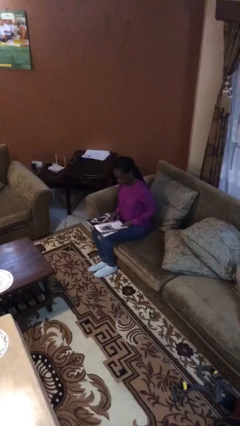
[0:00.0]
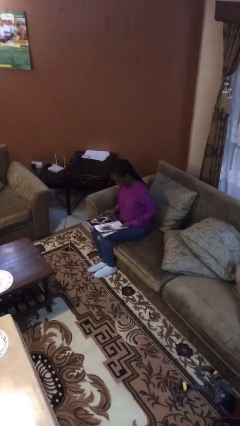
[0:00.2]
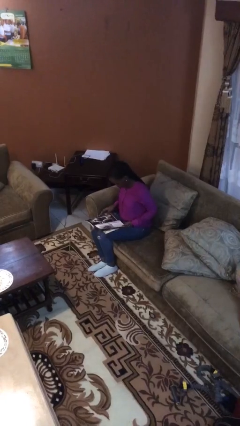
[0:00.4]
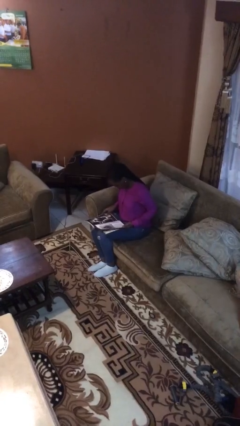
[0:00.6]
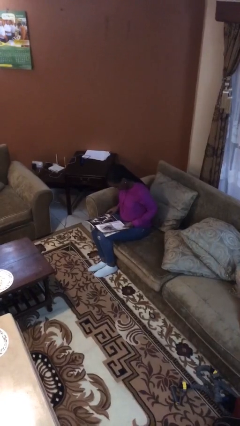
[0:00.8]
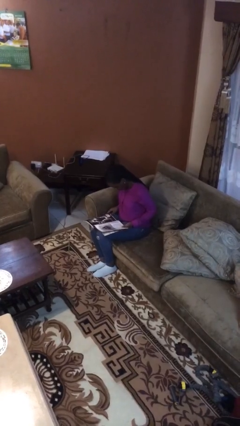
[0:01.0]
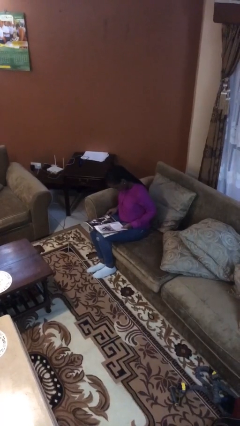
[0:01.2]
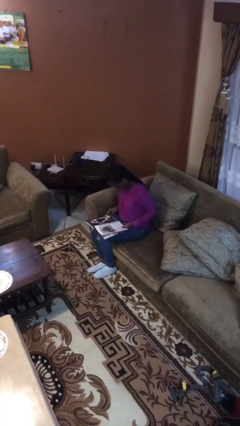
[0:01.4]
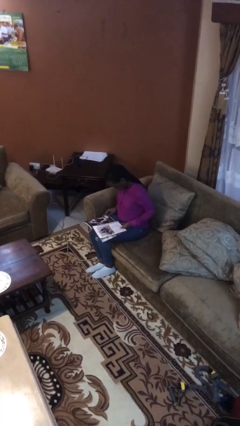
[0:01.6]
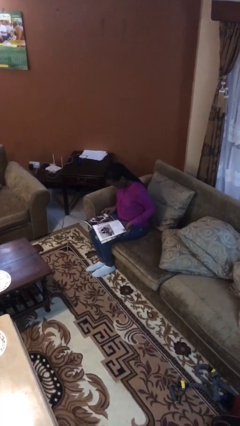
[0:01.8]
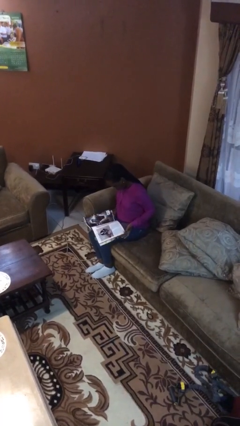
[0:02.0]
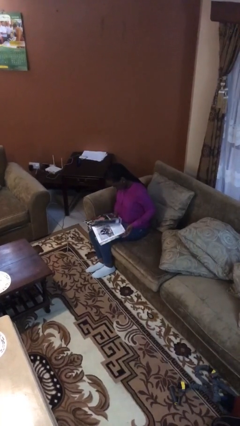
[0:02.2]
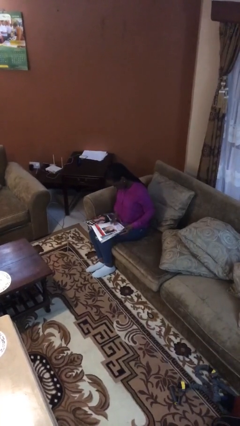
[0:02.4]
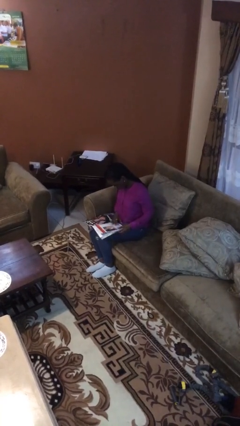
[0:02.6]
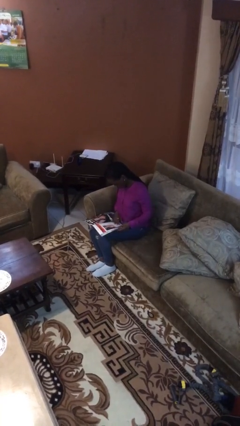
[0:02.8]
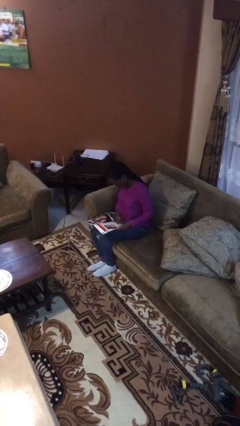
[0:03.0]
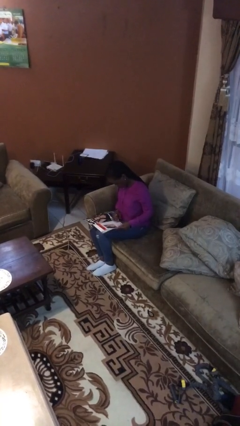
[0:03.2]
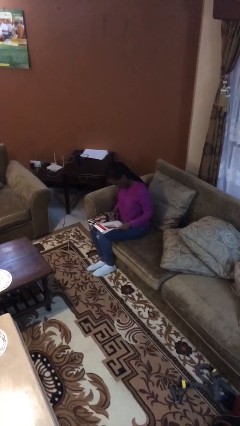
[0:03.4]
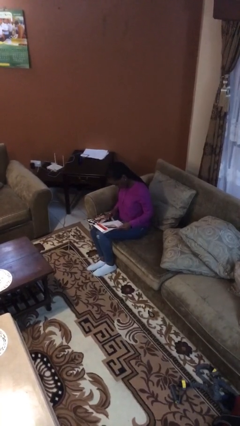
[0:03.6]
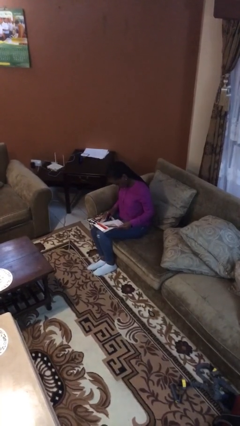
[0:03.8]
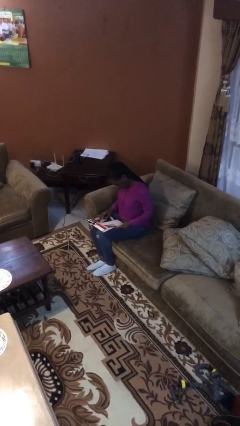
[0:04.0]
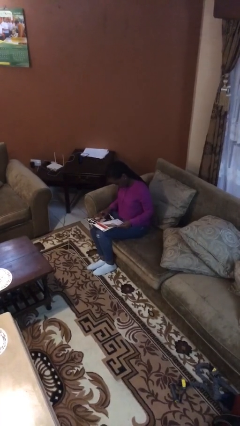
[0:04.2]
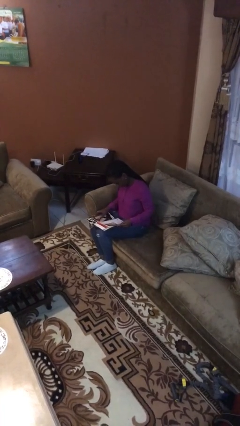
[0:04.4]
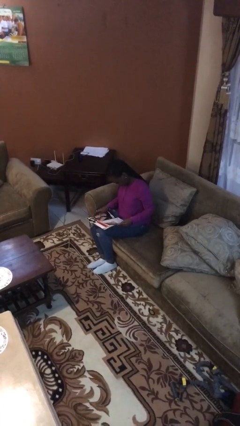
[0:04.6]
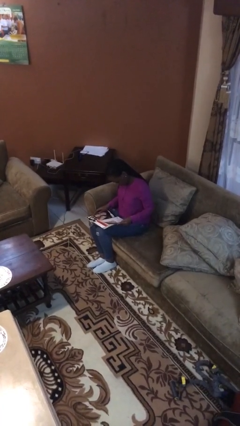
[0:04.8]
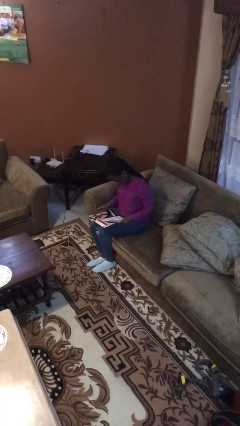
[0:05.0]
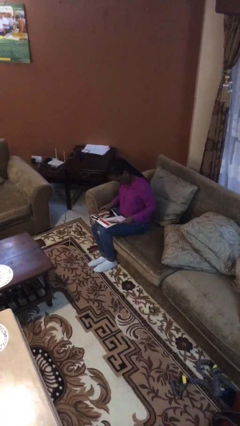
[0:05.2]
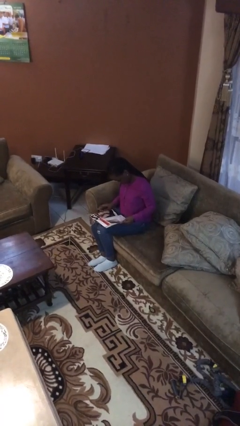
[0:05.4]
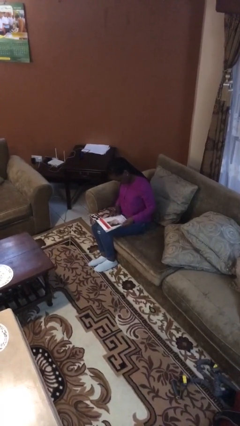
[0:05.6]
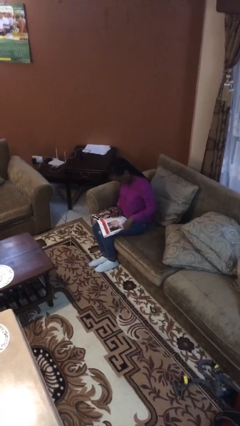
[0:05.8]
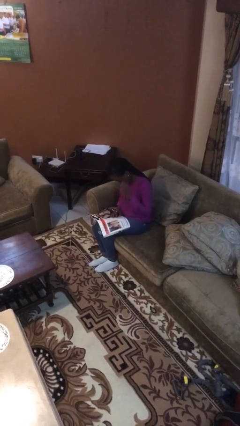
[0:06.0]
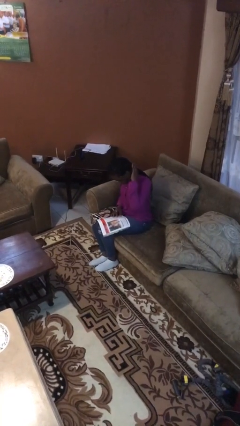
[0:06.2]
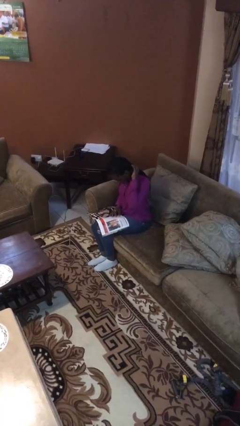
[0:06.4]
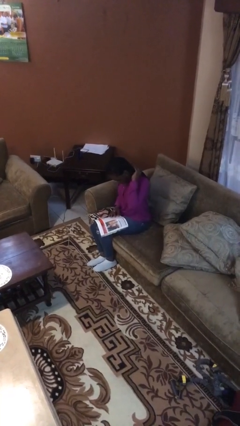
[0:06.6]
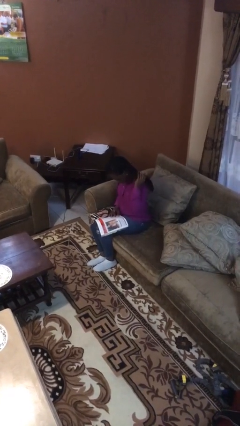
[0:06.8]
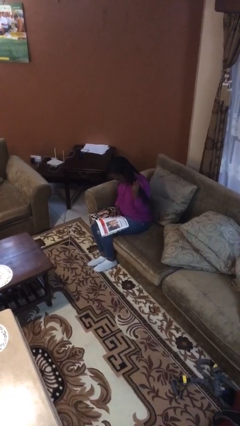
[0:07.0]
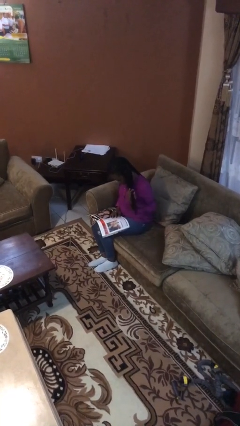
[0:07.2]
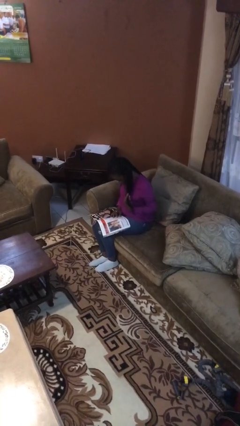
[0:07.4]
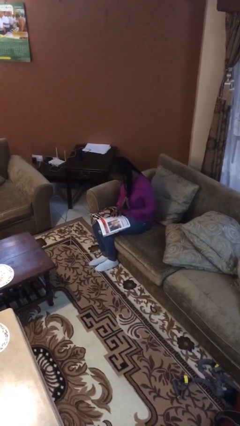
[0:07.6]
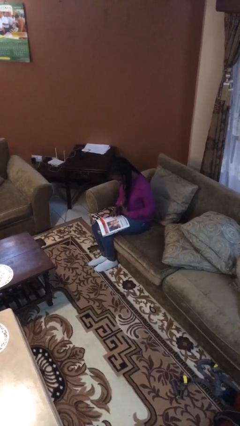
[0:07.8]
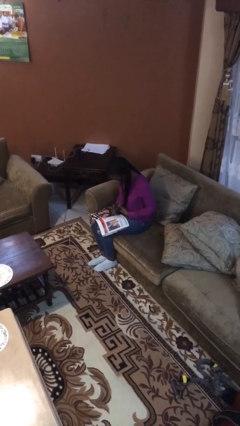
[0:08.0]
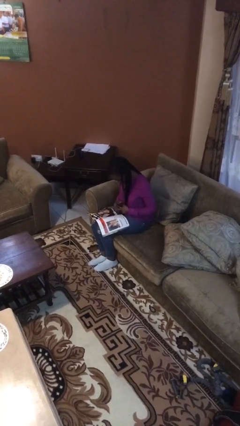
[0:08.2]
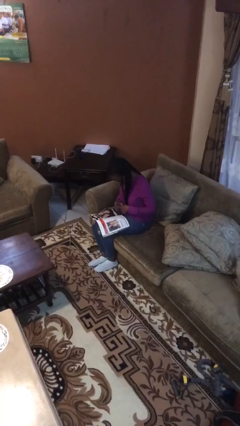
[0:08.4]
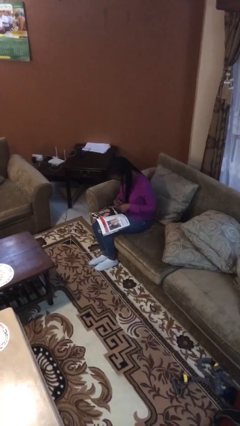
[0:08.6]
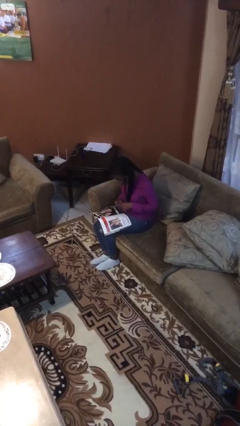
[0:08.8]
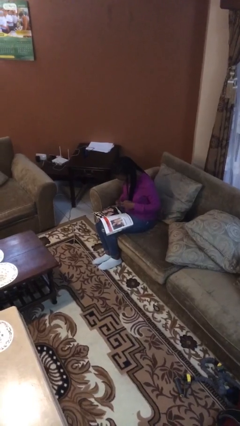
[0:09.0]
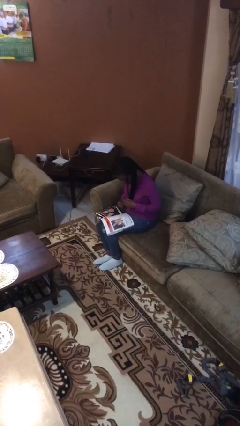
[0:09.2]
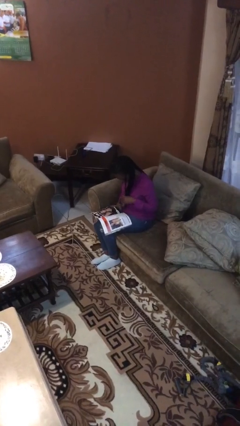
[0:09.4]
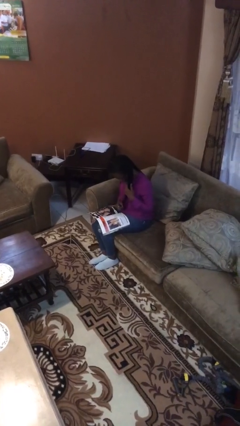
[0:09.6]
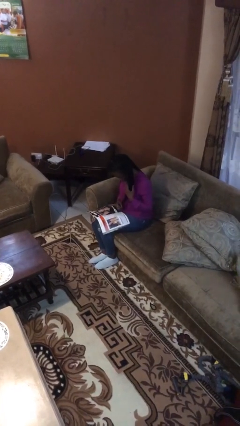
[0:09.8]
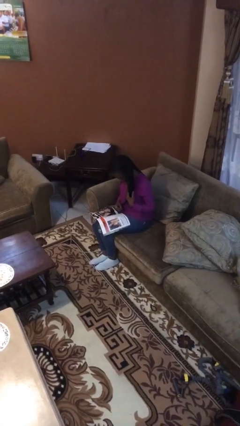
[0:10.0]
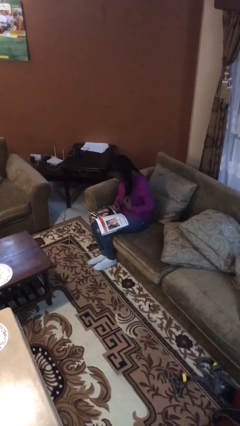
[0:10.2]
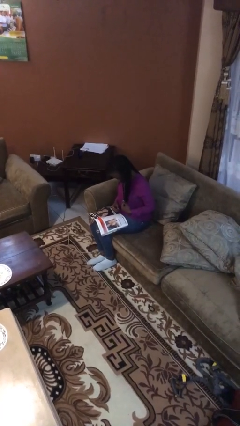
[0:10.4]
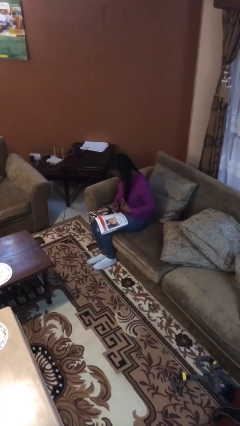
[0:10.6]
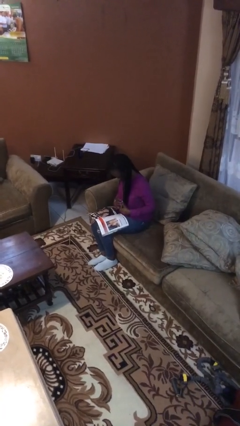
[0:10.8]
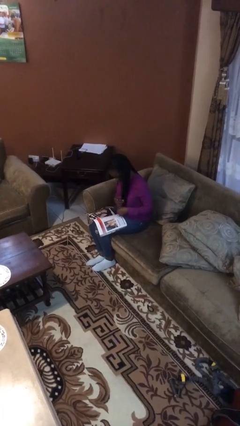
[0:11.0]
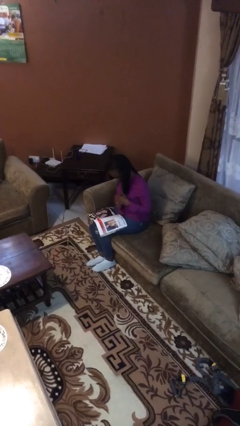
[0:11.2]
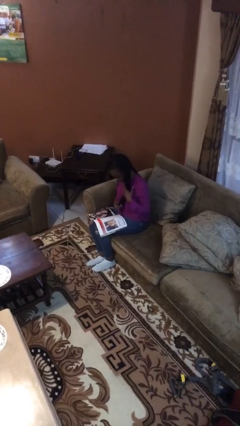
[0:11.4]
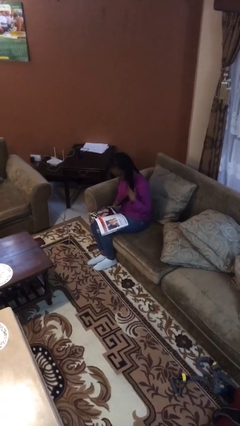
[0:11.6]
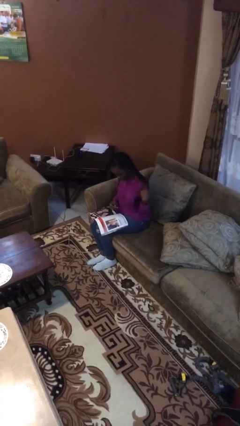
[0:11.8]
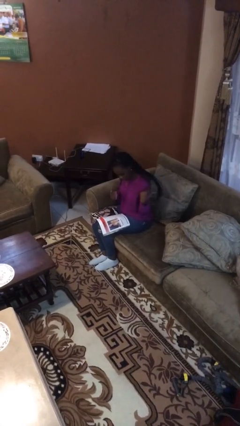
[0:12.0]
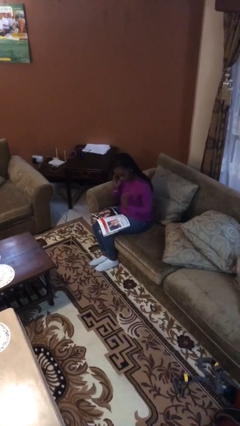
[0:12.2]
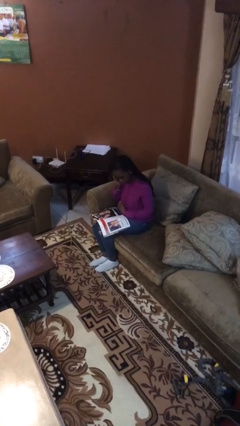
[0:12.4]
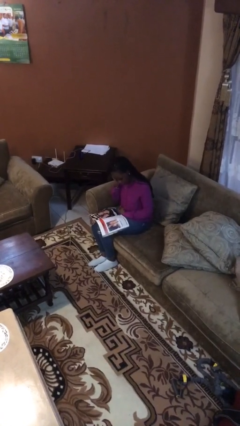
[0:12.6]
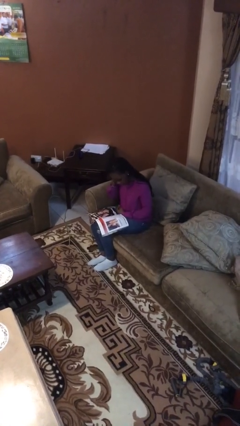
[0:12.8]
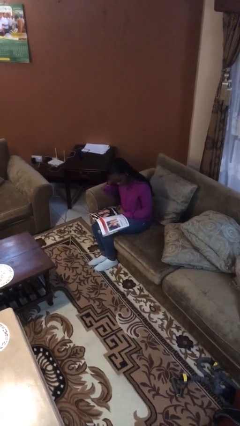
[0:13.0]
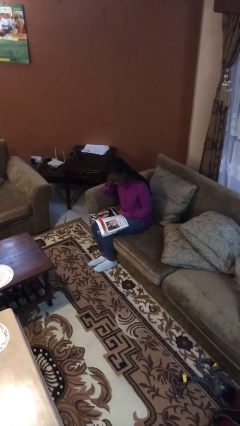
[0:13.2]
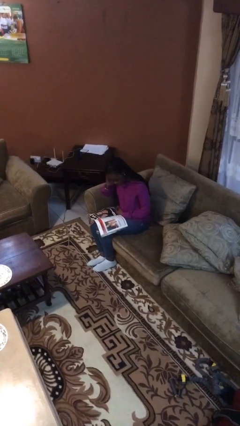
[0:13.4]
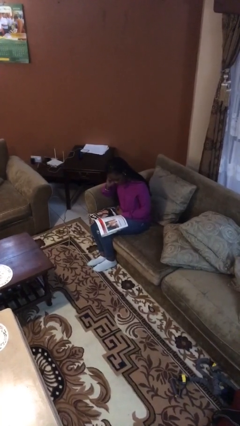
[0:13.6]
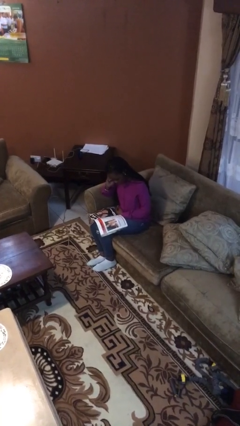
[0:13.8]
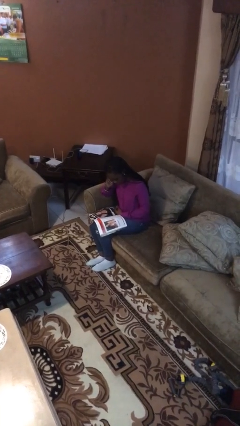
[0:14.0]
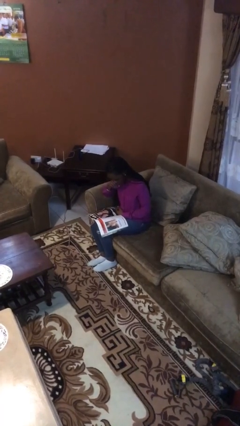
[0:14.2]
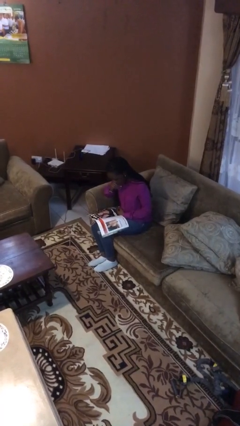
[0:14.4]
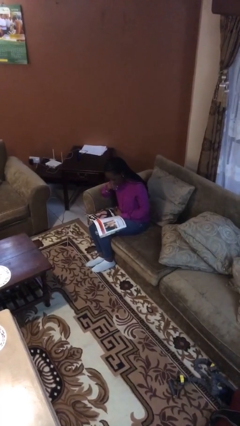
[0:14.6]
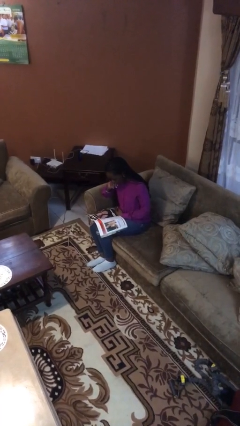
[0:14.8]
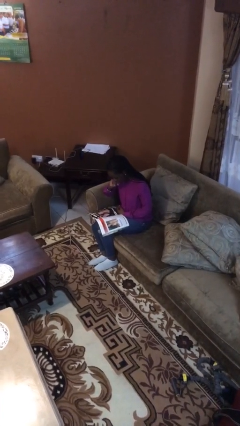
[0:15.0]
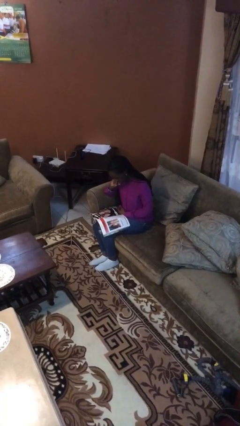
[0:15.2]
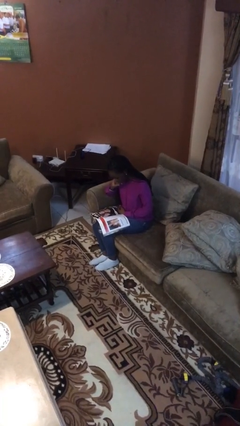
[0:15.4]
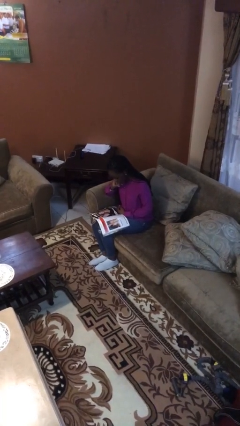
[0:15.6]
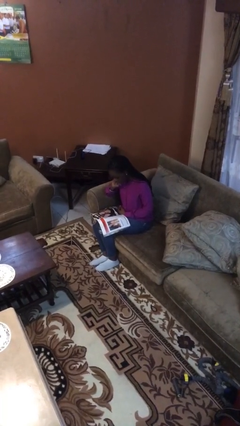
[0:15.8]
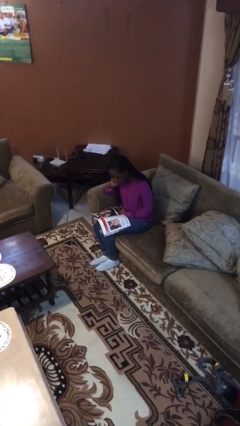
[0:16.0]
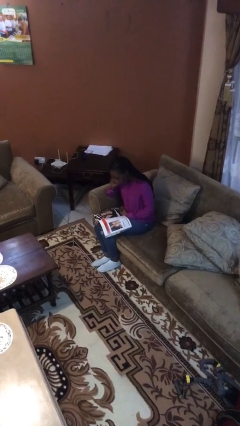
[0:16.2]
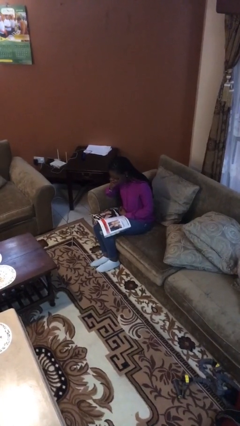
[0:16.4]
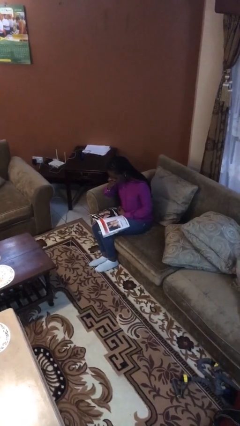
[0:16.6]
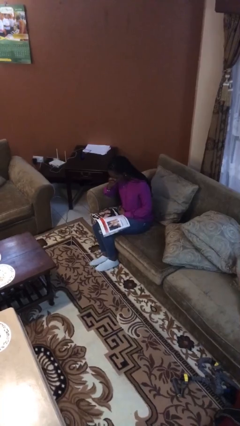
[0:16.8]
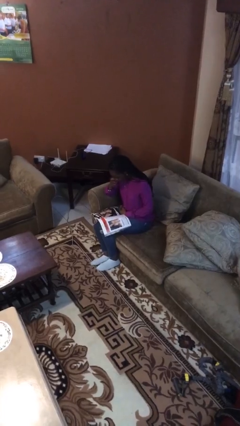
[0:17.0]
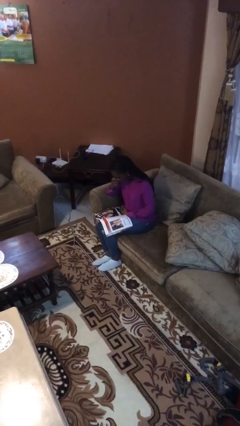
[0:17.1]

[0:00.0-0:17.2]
person reads document

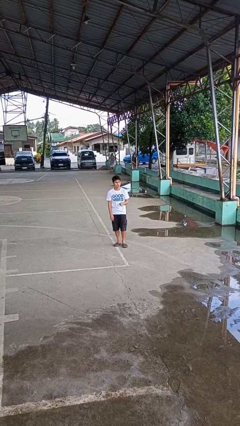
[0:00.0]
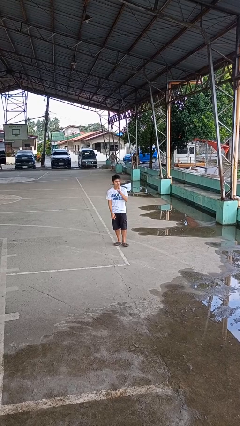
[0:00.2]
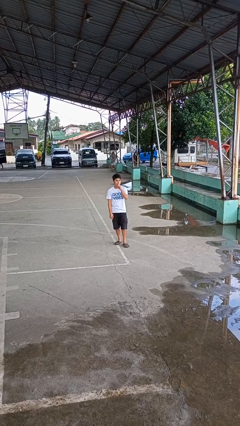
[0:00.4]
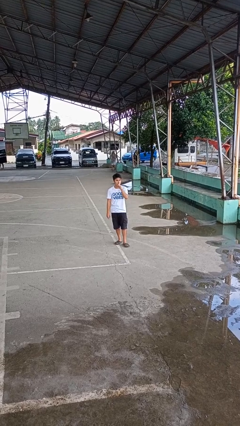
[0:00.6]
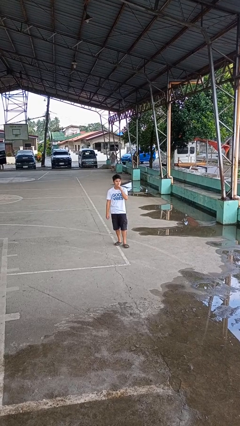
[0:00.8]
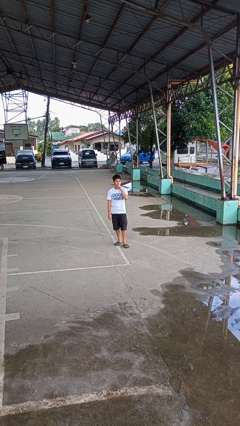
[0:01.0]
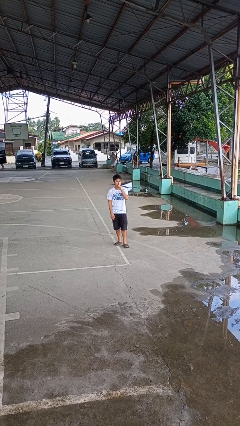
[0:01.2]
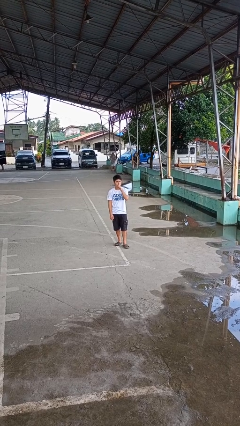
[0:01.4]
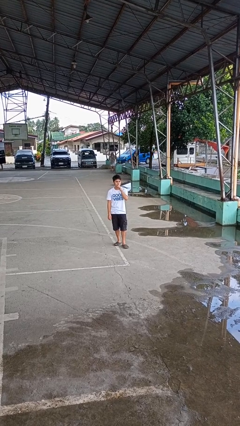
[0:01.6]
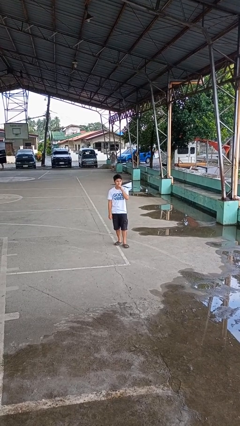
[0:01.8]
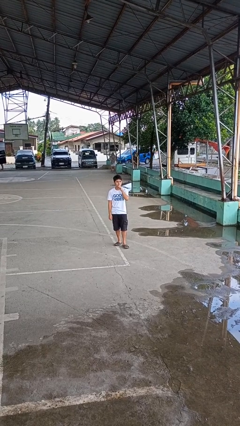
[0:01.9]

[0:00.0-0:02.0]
person gestures be quiet
